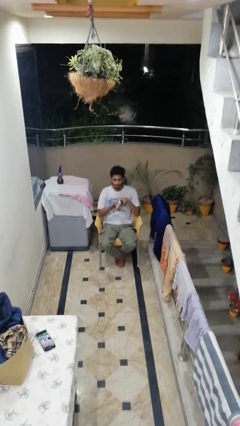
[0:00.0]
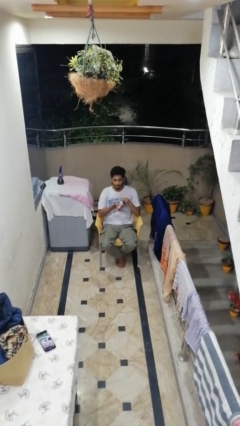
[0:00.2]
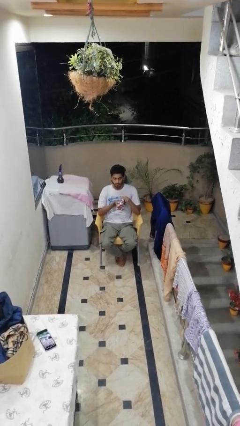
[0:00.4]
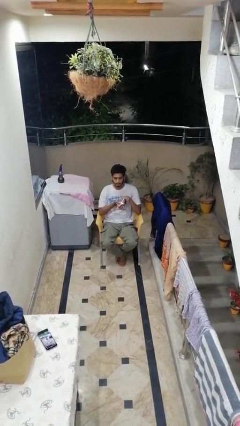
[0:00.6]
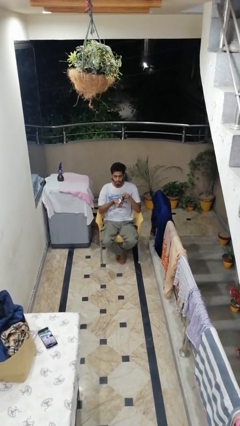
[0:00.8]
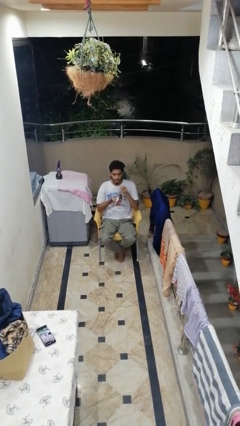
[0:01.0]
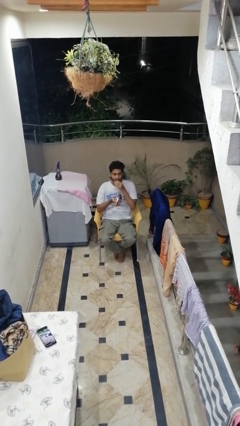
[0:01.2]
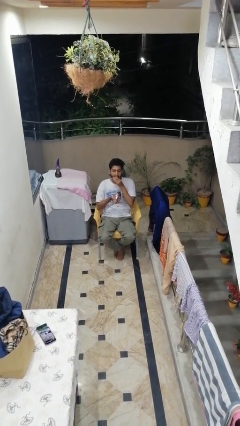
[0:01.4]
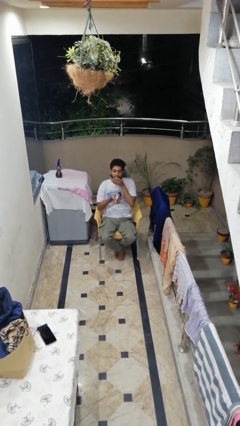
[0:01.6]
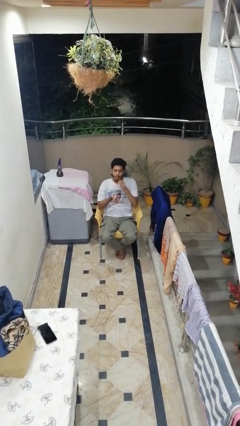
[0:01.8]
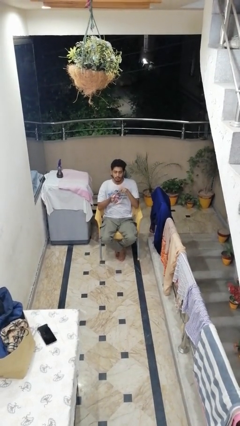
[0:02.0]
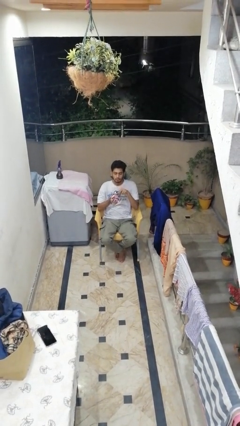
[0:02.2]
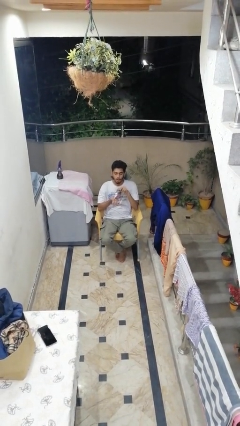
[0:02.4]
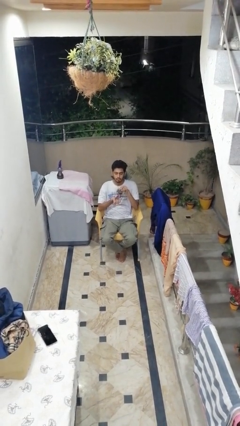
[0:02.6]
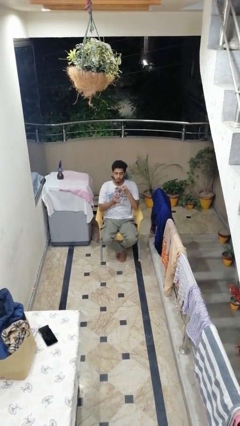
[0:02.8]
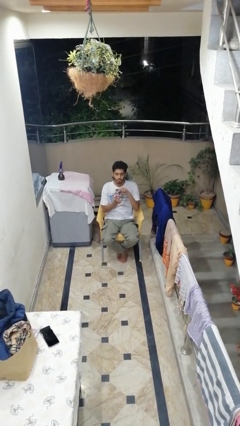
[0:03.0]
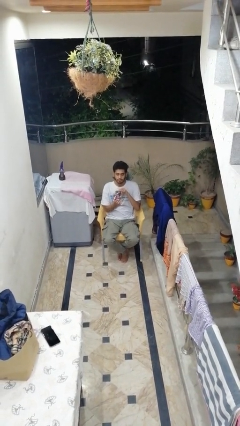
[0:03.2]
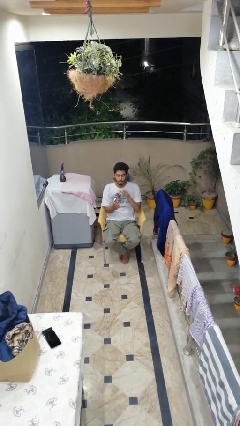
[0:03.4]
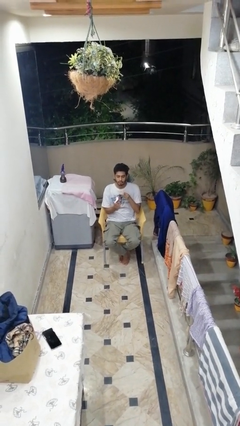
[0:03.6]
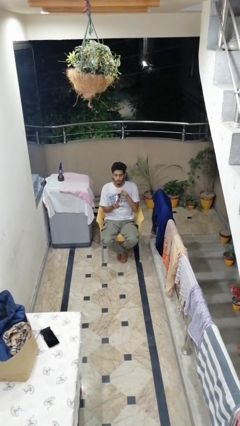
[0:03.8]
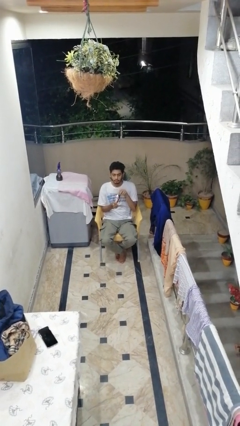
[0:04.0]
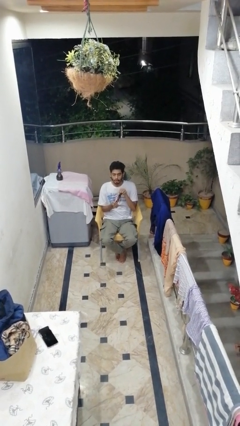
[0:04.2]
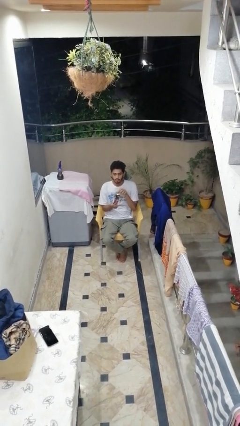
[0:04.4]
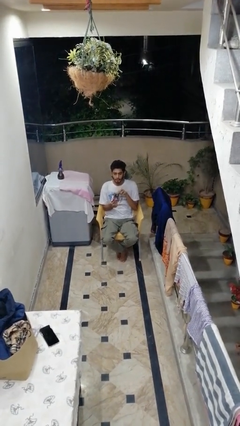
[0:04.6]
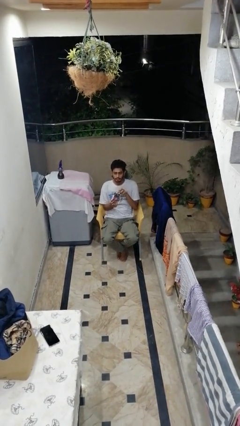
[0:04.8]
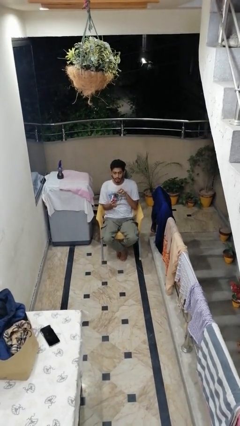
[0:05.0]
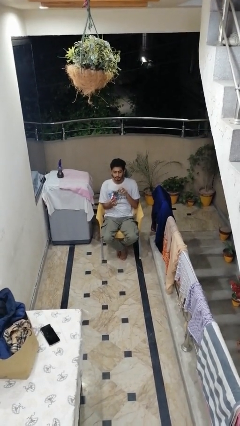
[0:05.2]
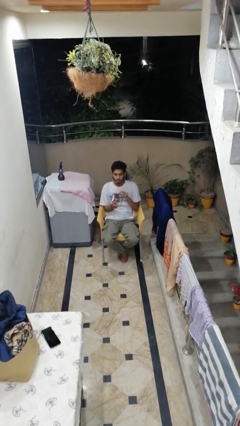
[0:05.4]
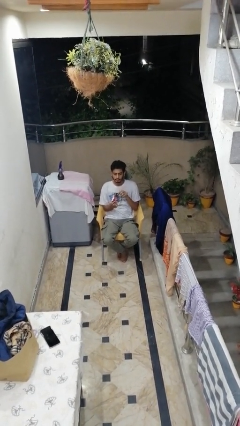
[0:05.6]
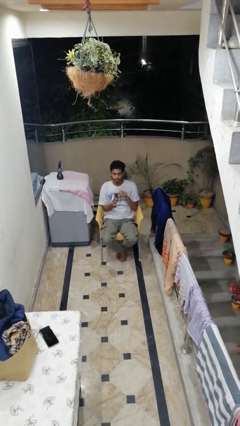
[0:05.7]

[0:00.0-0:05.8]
person eats snack from bag

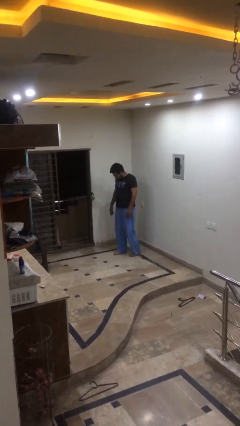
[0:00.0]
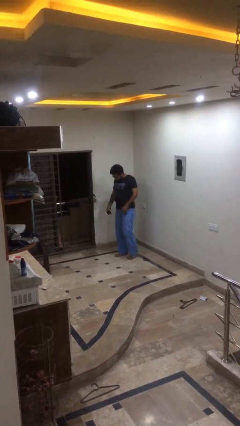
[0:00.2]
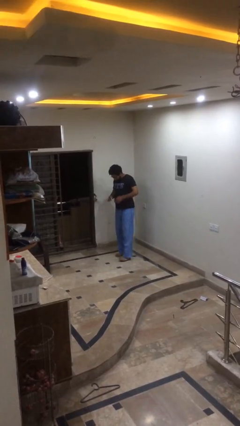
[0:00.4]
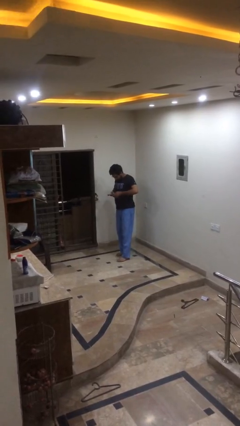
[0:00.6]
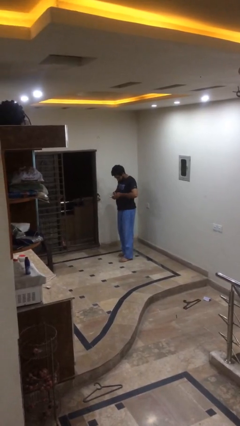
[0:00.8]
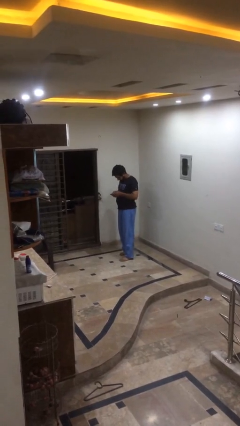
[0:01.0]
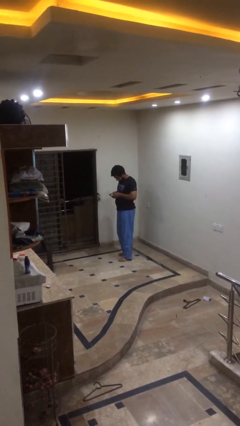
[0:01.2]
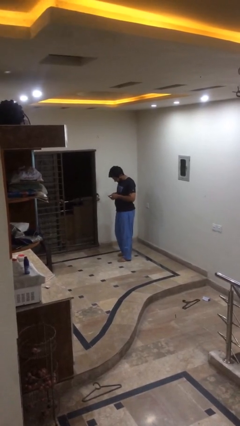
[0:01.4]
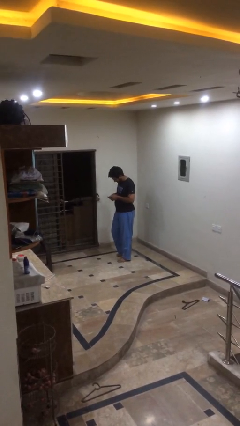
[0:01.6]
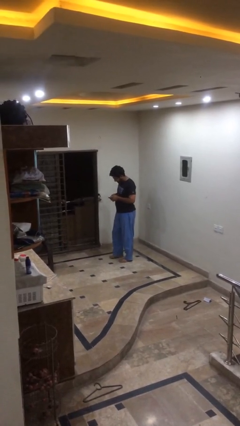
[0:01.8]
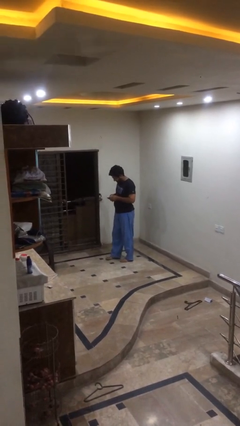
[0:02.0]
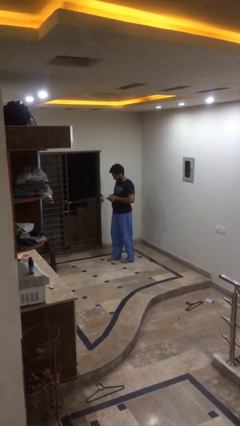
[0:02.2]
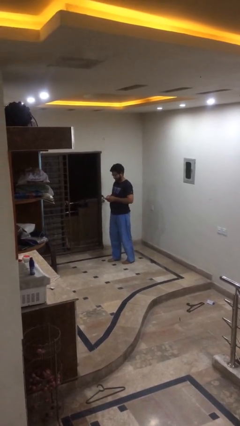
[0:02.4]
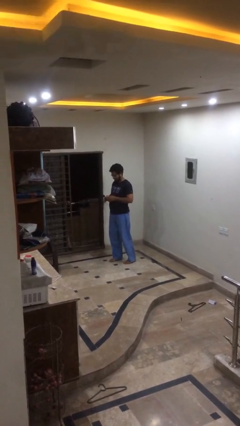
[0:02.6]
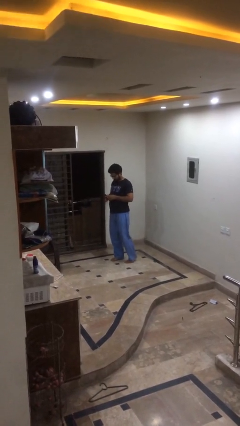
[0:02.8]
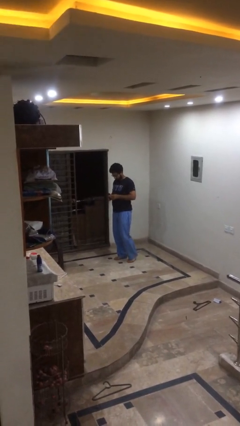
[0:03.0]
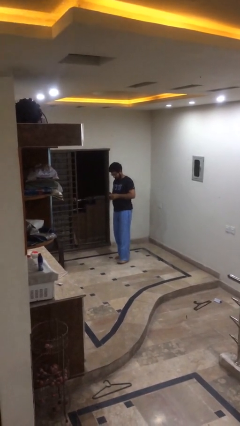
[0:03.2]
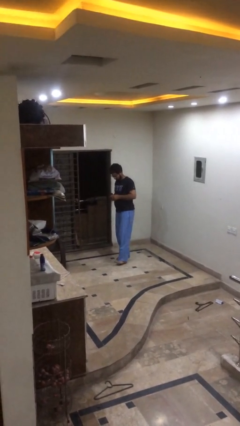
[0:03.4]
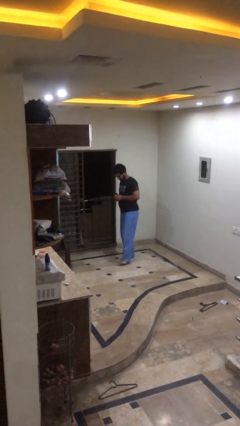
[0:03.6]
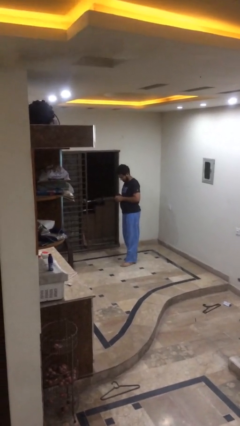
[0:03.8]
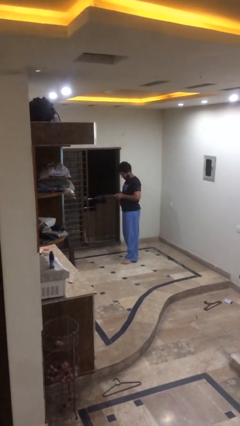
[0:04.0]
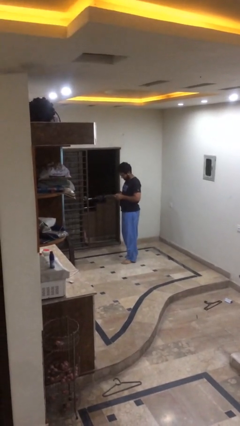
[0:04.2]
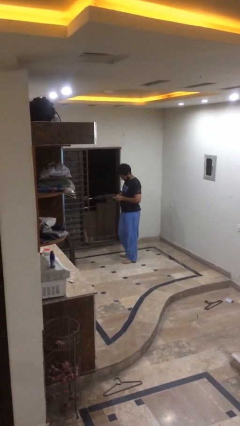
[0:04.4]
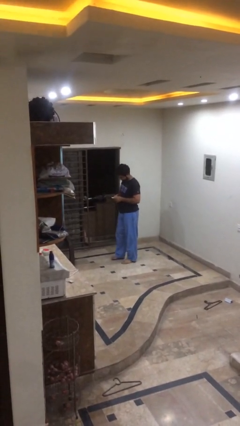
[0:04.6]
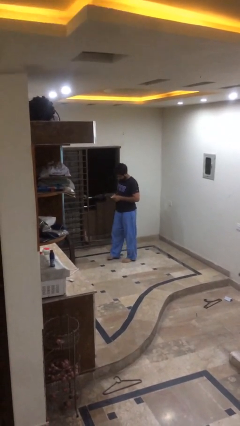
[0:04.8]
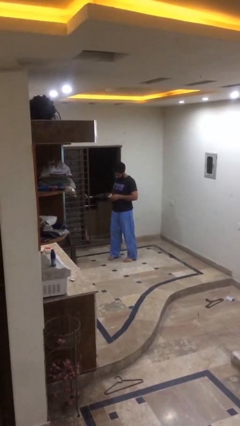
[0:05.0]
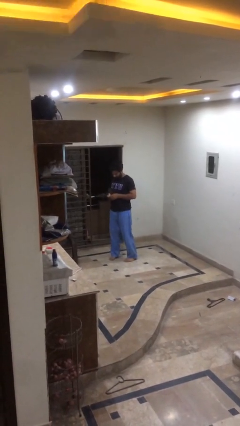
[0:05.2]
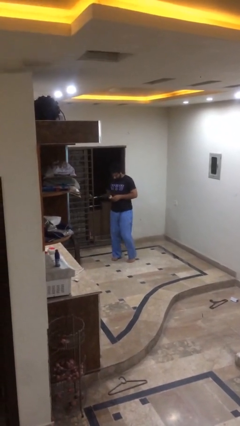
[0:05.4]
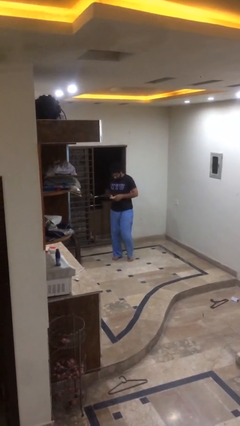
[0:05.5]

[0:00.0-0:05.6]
person texts on phone

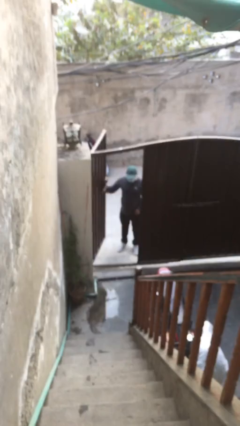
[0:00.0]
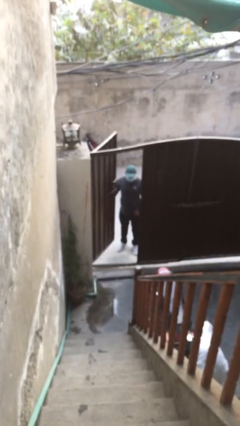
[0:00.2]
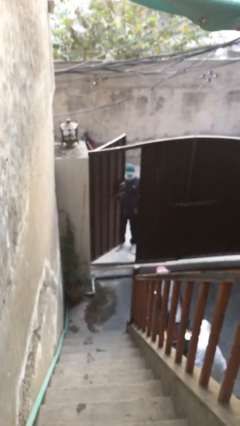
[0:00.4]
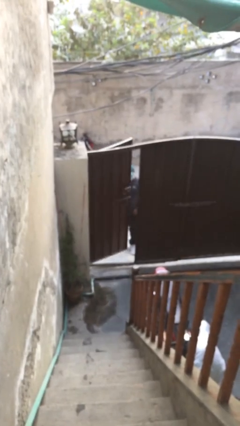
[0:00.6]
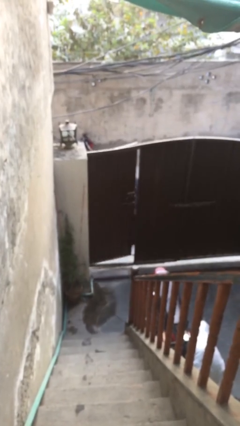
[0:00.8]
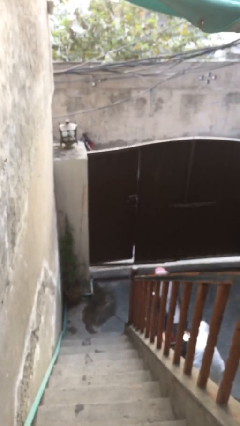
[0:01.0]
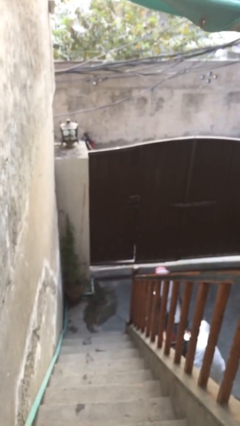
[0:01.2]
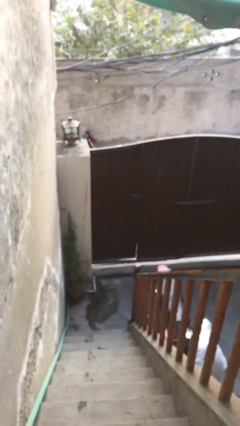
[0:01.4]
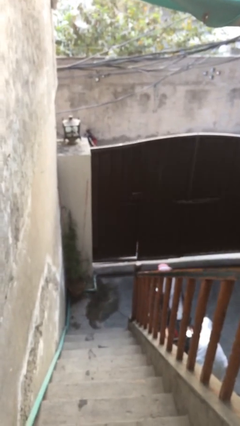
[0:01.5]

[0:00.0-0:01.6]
person closes facility door

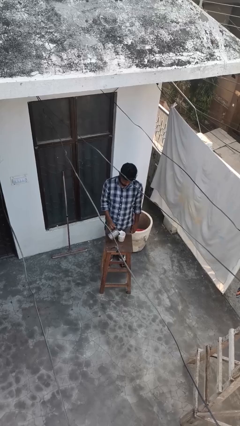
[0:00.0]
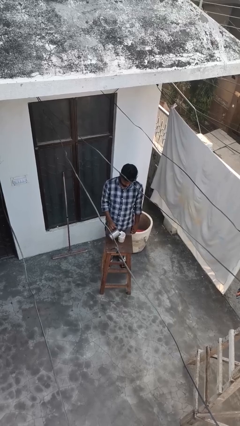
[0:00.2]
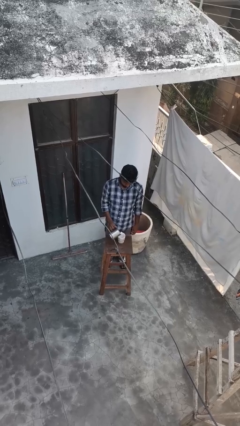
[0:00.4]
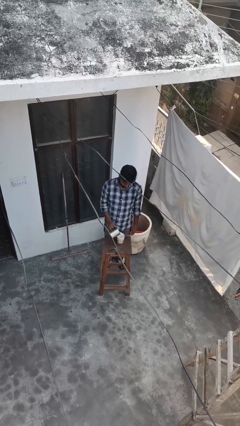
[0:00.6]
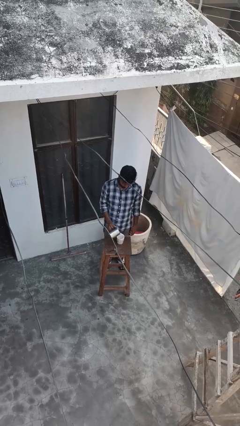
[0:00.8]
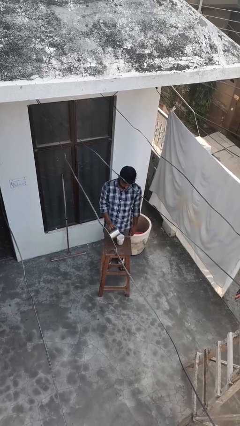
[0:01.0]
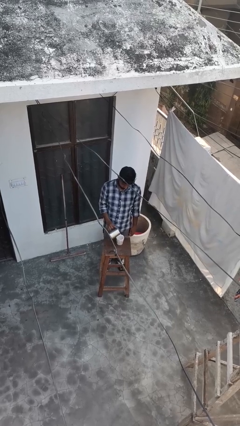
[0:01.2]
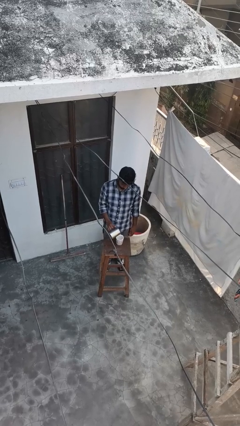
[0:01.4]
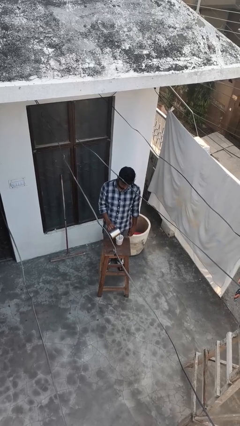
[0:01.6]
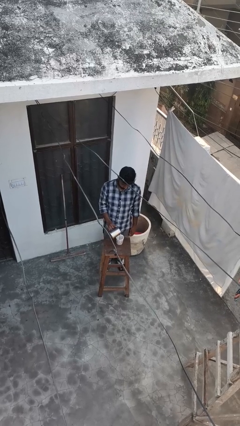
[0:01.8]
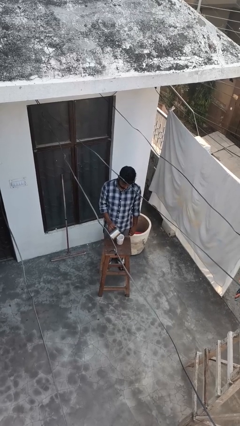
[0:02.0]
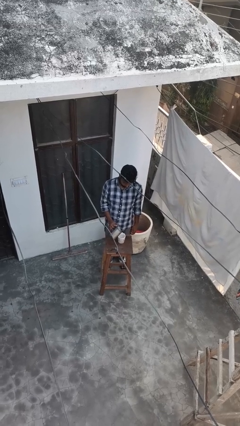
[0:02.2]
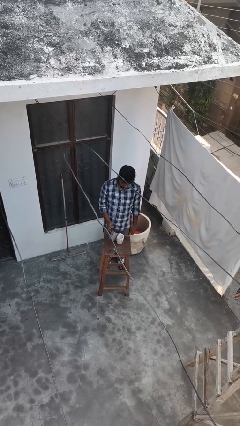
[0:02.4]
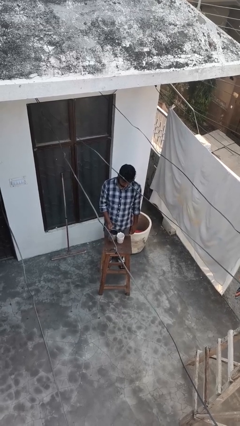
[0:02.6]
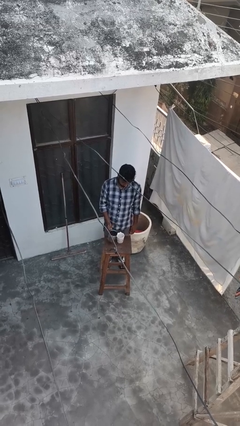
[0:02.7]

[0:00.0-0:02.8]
person pours coffee into mug

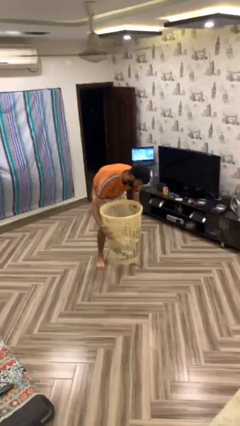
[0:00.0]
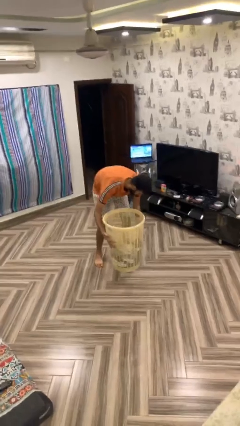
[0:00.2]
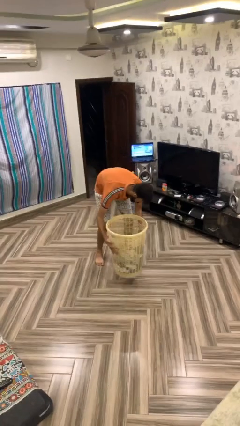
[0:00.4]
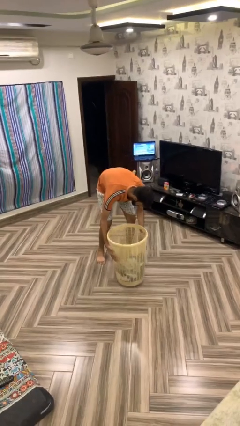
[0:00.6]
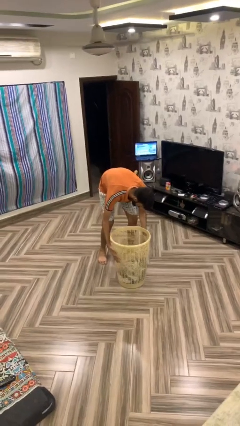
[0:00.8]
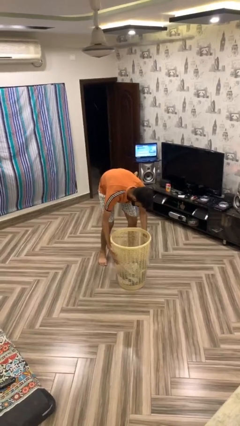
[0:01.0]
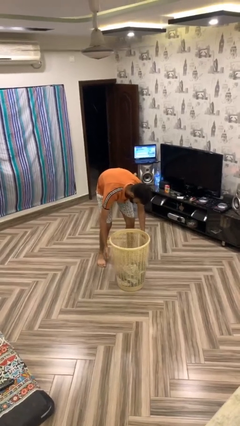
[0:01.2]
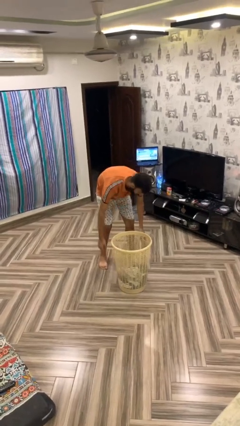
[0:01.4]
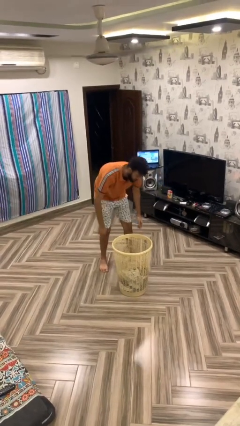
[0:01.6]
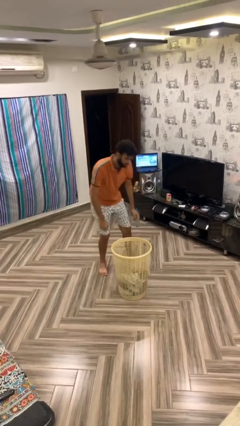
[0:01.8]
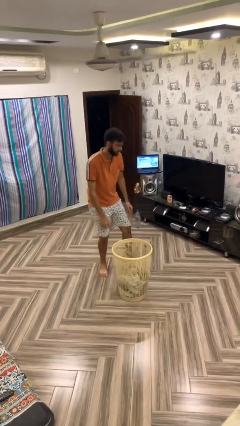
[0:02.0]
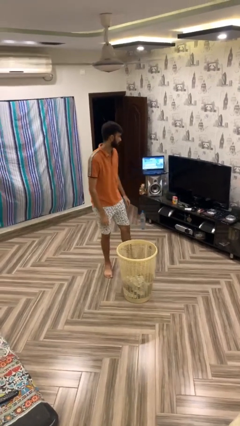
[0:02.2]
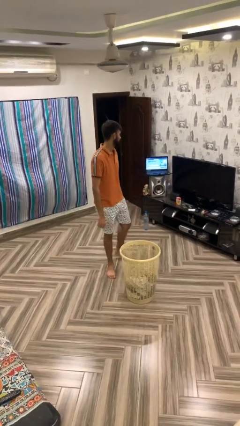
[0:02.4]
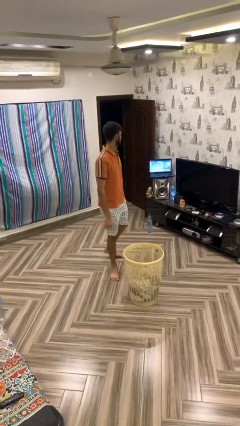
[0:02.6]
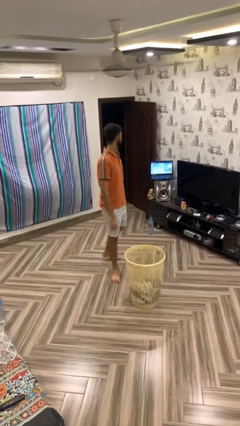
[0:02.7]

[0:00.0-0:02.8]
person puts down object on floor
